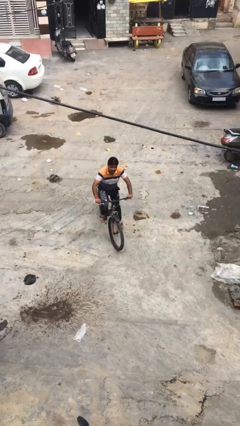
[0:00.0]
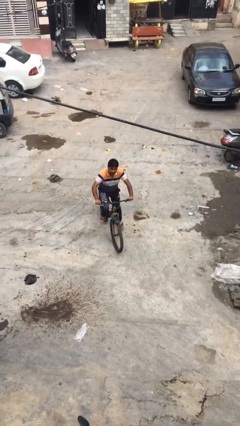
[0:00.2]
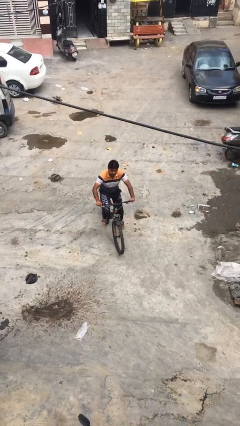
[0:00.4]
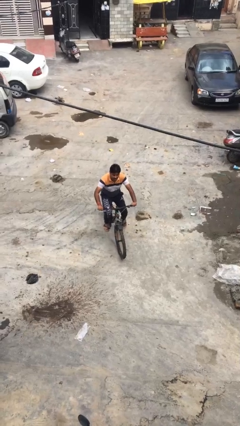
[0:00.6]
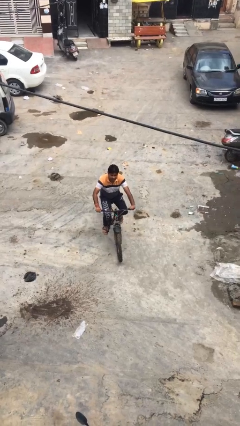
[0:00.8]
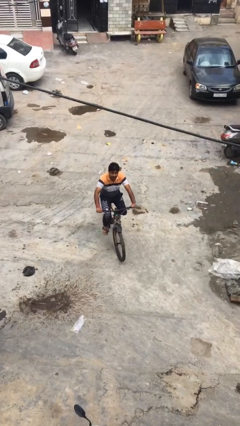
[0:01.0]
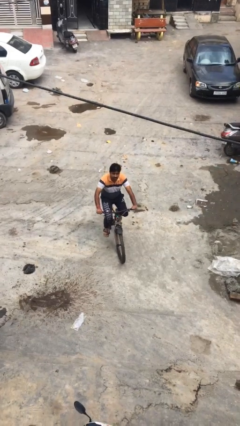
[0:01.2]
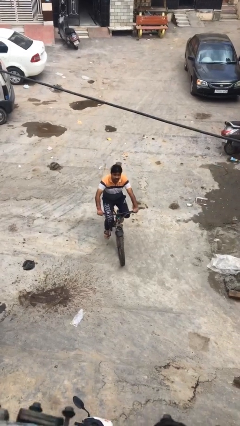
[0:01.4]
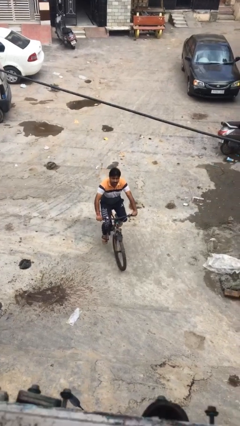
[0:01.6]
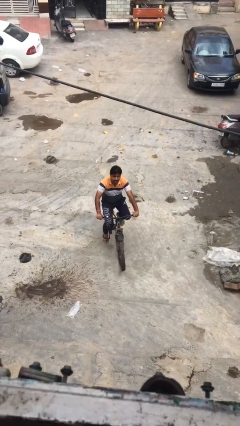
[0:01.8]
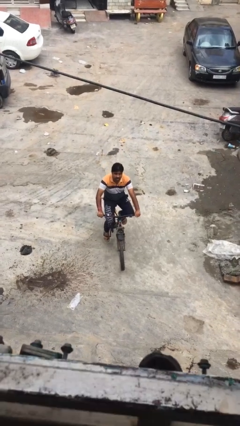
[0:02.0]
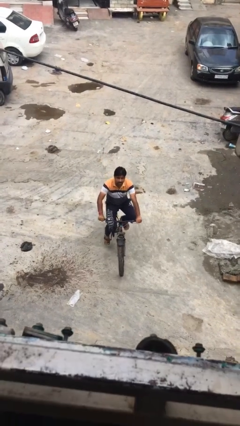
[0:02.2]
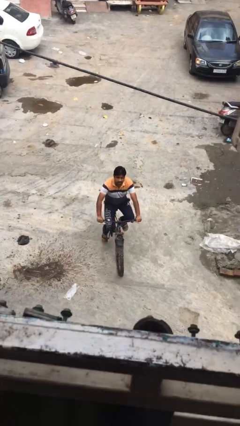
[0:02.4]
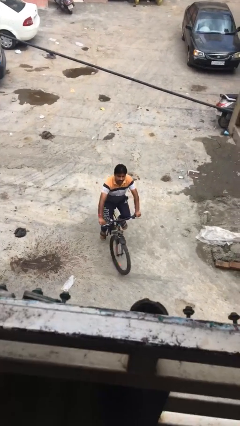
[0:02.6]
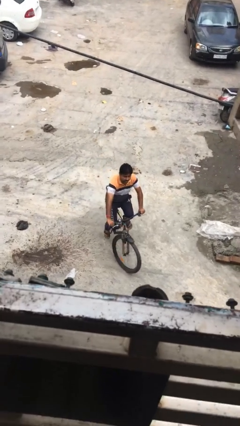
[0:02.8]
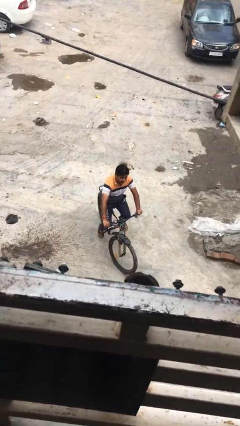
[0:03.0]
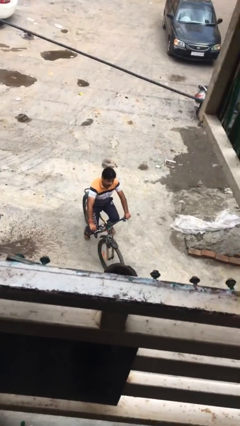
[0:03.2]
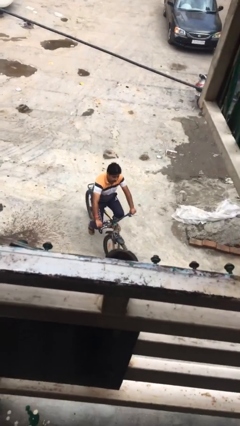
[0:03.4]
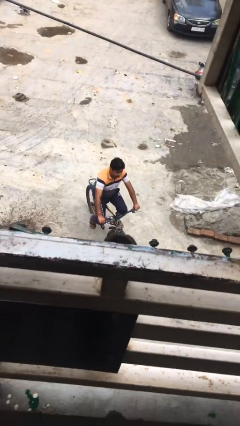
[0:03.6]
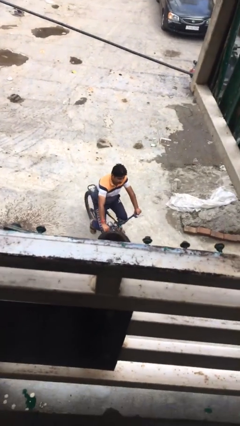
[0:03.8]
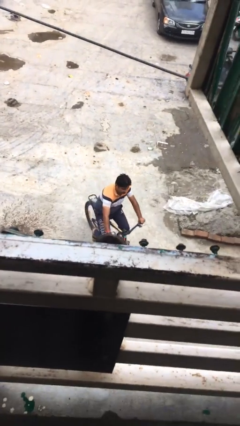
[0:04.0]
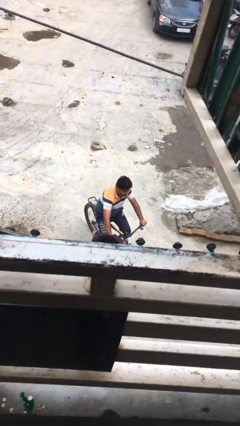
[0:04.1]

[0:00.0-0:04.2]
person rides bicycle

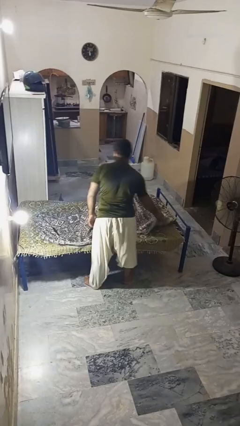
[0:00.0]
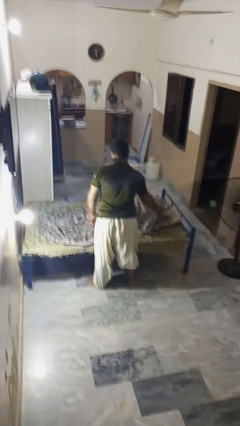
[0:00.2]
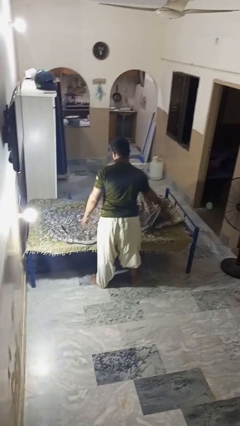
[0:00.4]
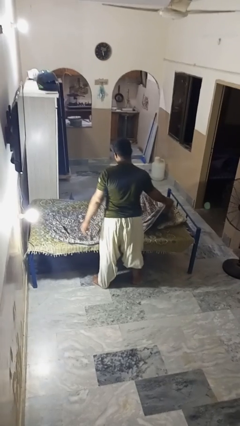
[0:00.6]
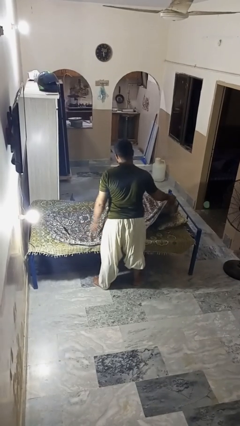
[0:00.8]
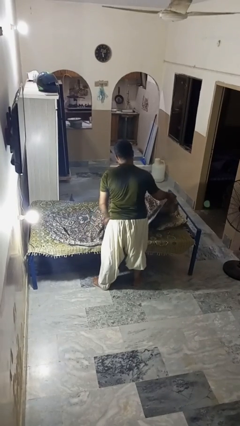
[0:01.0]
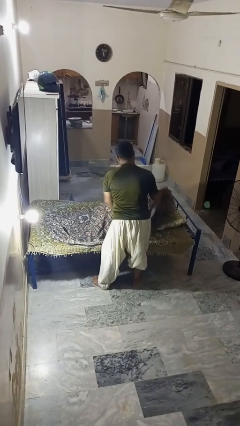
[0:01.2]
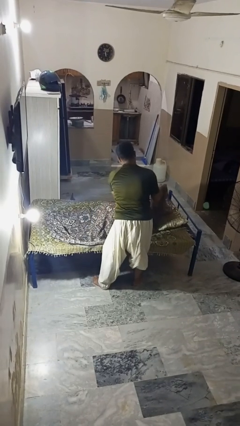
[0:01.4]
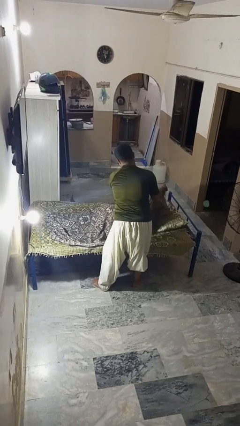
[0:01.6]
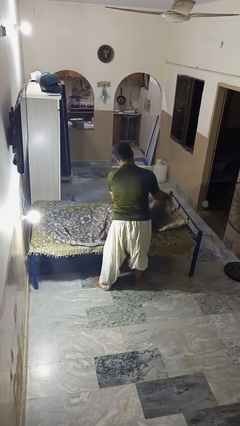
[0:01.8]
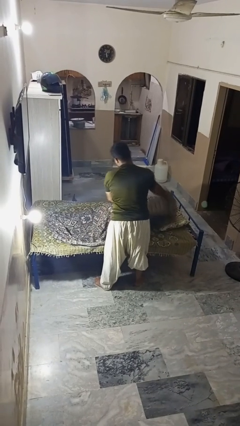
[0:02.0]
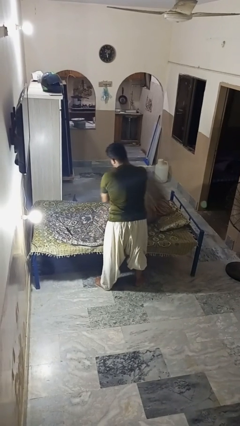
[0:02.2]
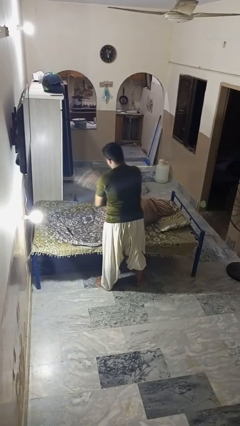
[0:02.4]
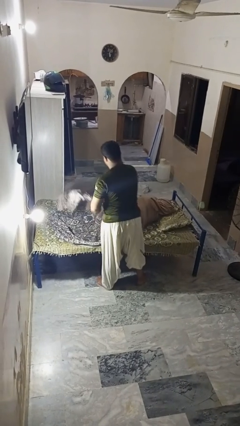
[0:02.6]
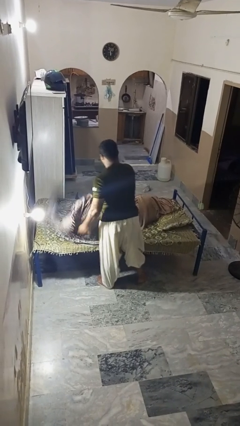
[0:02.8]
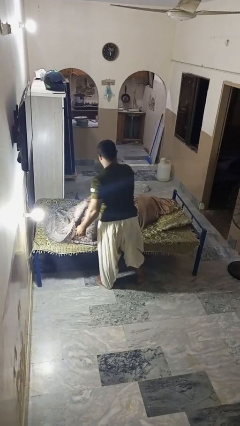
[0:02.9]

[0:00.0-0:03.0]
person uncovers friend with blanket

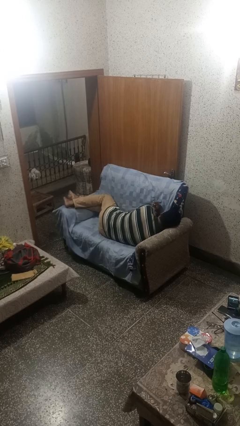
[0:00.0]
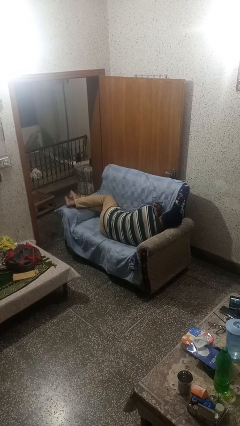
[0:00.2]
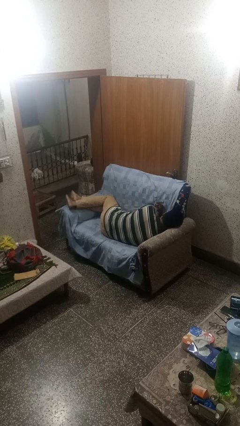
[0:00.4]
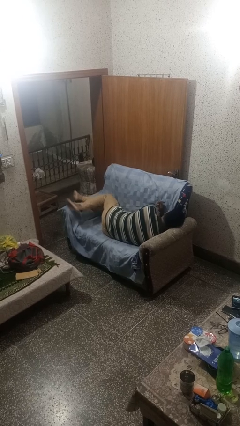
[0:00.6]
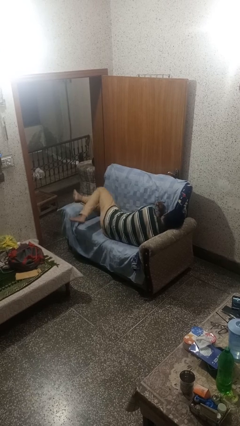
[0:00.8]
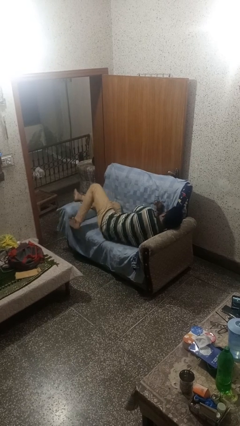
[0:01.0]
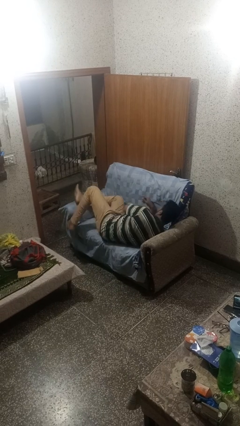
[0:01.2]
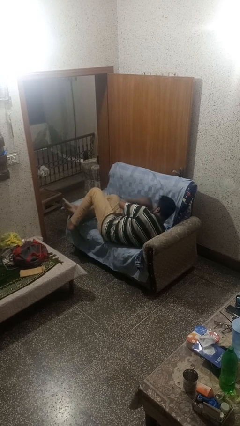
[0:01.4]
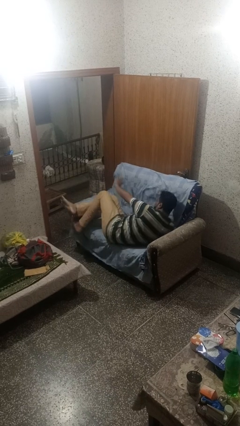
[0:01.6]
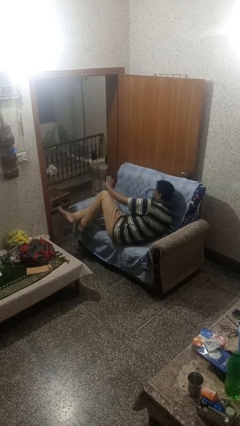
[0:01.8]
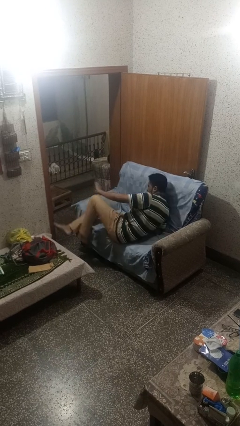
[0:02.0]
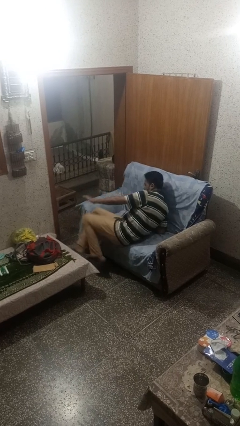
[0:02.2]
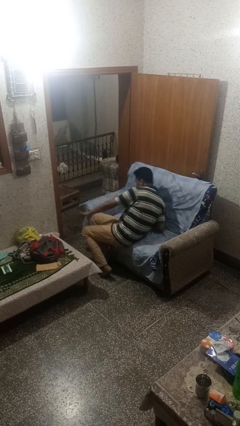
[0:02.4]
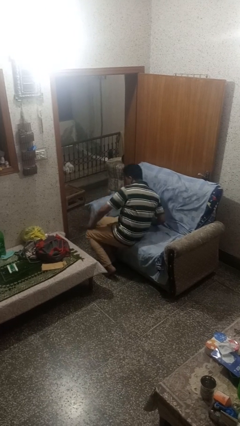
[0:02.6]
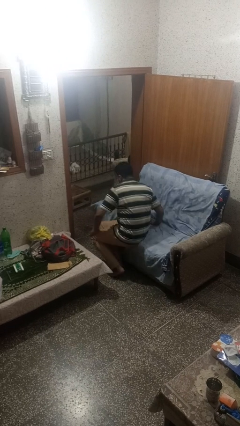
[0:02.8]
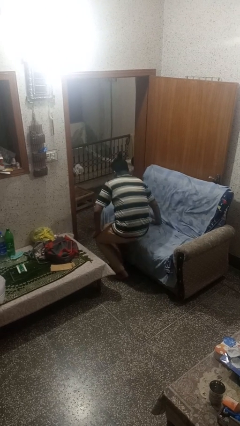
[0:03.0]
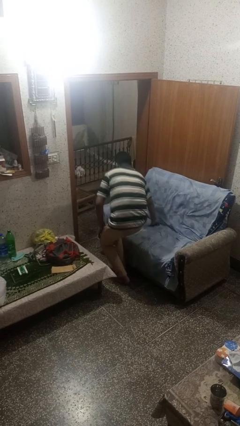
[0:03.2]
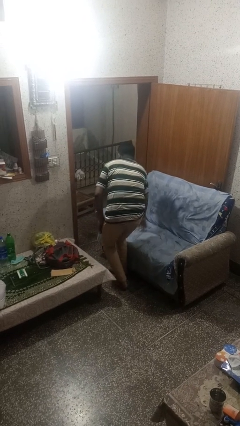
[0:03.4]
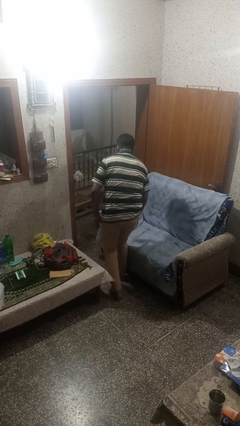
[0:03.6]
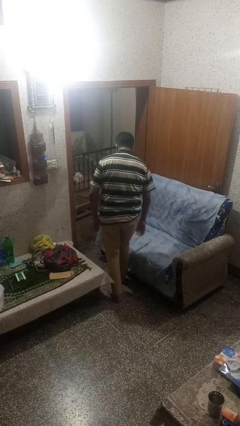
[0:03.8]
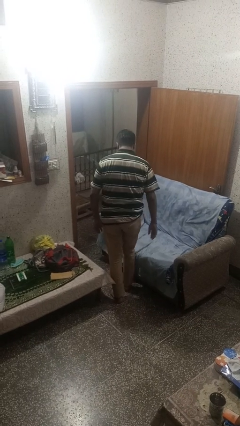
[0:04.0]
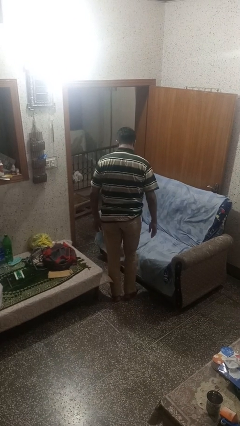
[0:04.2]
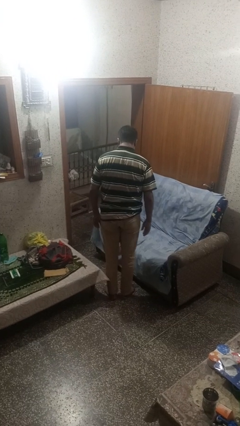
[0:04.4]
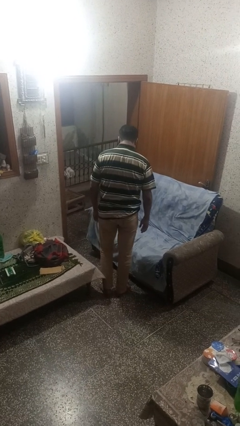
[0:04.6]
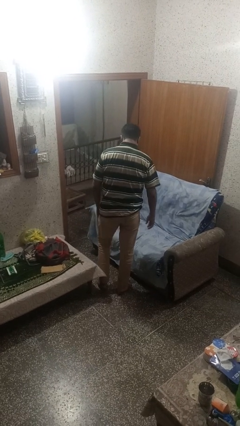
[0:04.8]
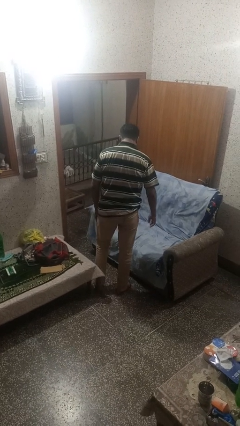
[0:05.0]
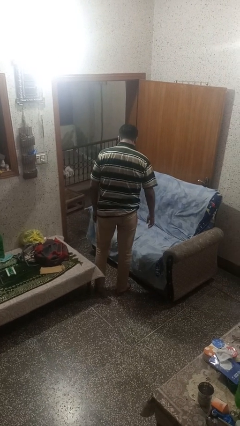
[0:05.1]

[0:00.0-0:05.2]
person stands up

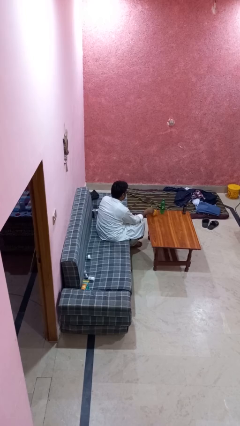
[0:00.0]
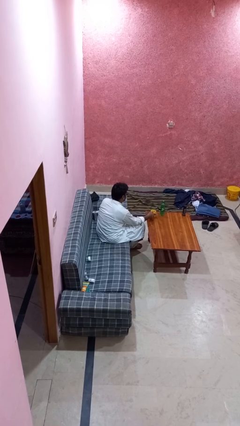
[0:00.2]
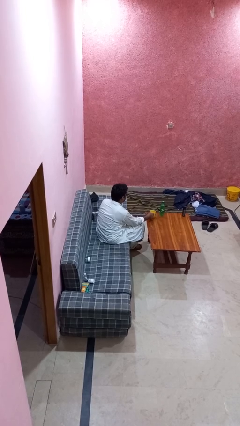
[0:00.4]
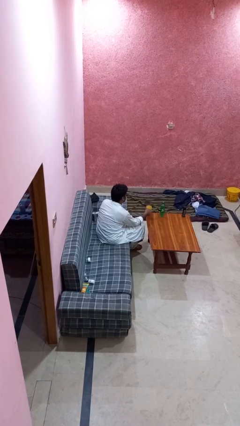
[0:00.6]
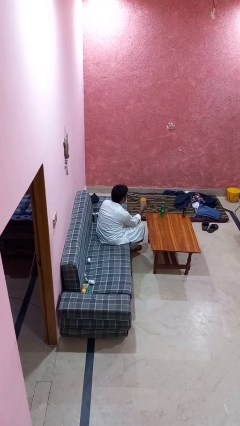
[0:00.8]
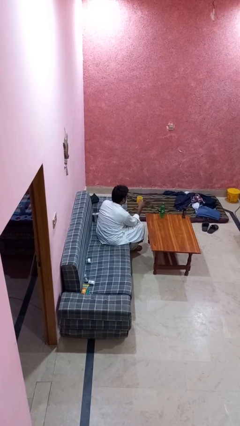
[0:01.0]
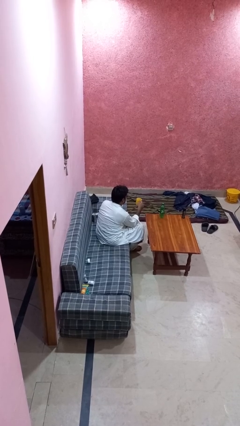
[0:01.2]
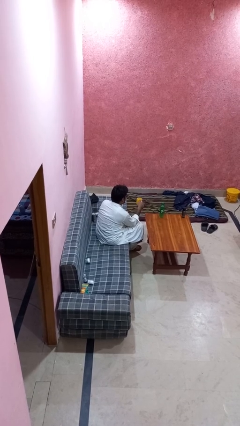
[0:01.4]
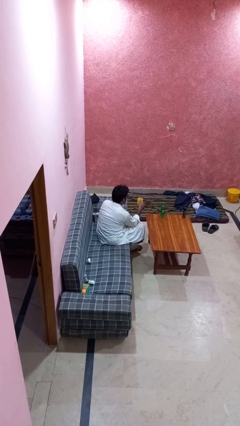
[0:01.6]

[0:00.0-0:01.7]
person picks up object from table

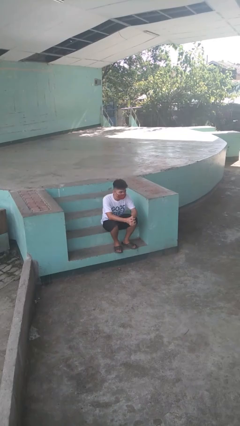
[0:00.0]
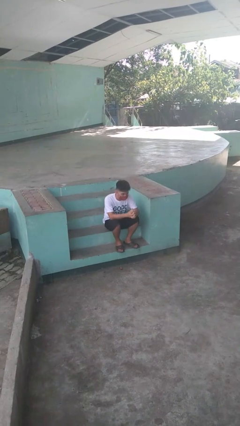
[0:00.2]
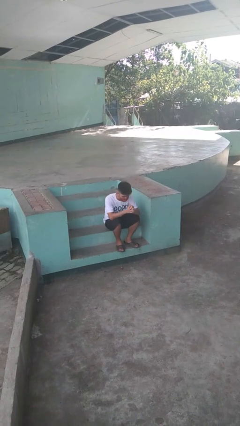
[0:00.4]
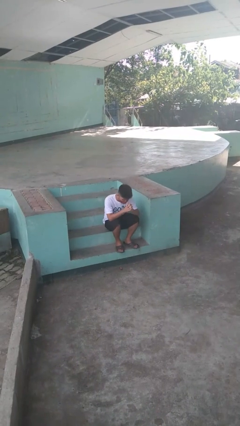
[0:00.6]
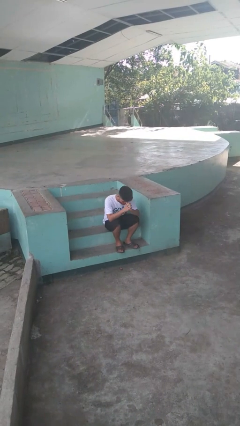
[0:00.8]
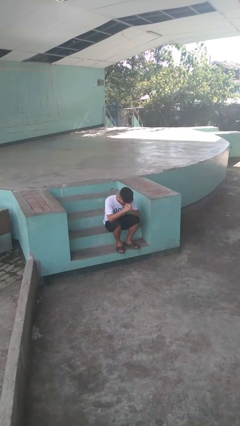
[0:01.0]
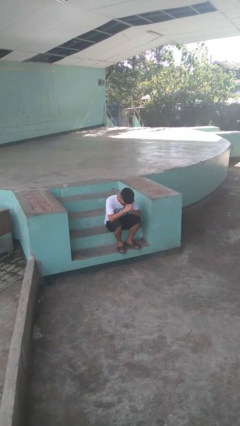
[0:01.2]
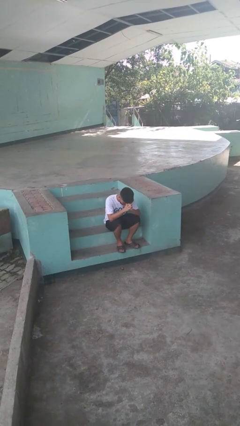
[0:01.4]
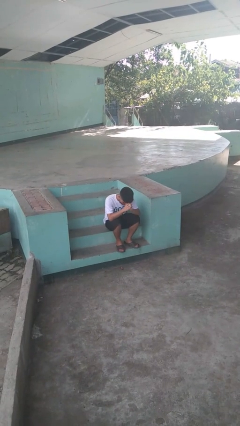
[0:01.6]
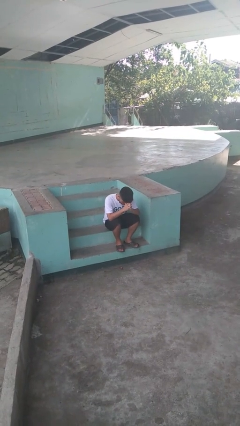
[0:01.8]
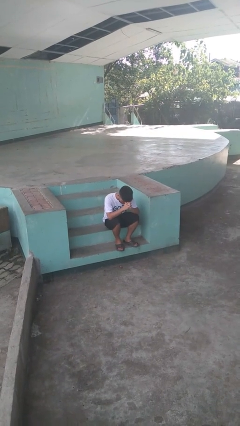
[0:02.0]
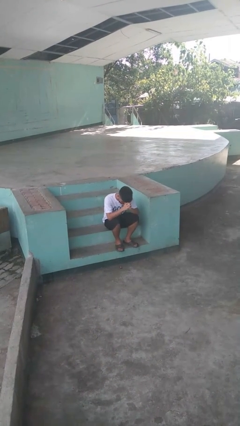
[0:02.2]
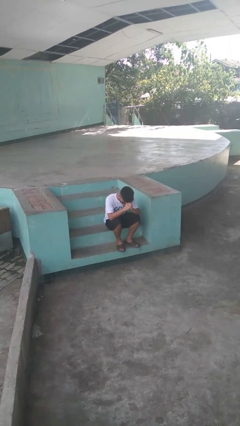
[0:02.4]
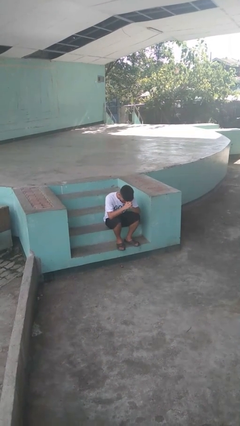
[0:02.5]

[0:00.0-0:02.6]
person prays

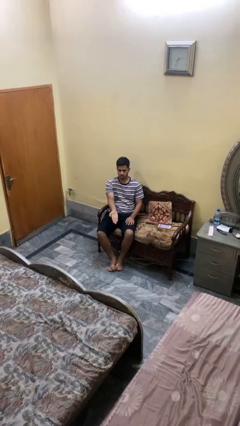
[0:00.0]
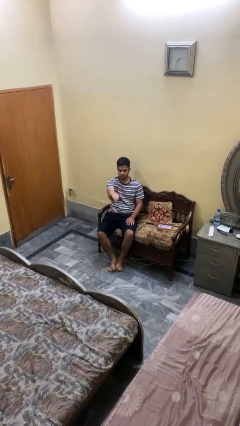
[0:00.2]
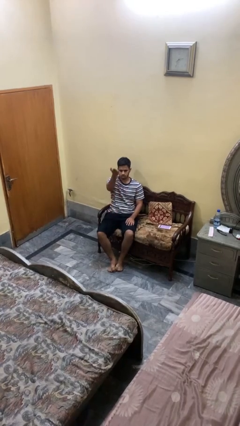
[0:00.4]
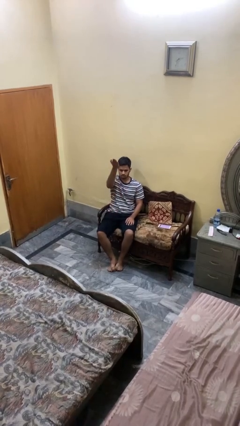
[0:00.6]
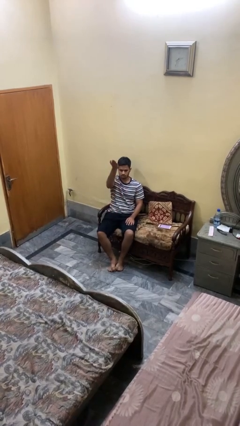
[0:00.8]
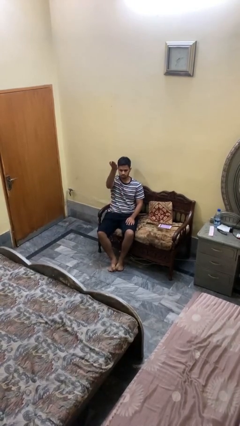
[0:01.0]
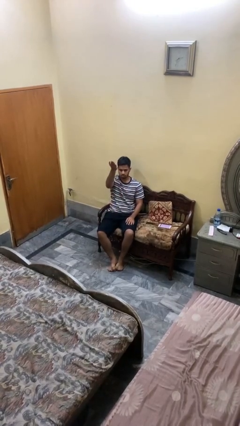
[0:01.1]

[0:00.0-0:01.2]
person gestures swipe up
